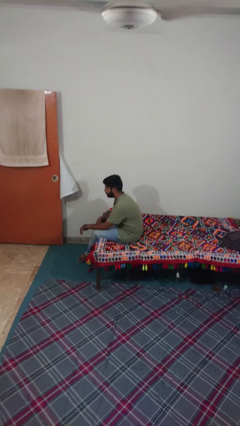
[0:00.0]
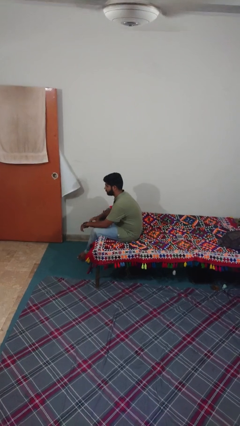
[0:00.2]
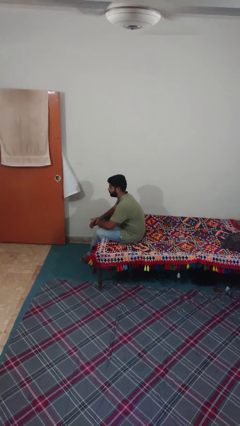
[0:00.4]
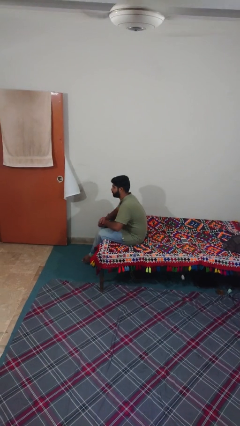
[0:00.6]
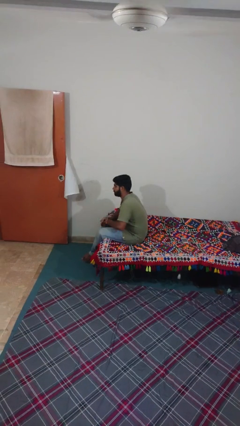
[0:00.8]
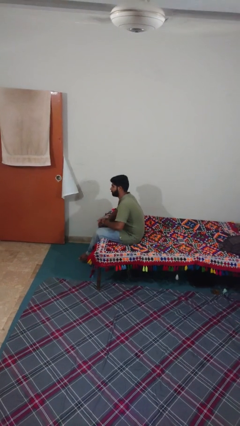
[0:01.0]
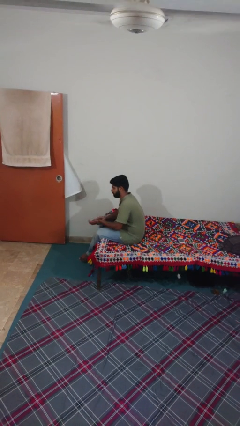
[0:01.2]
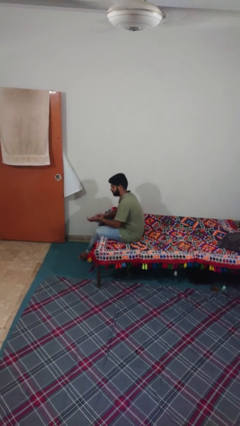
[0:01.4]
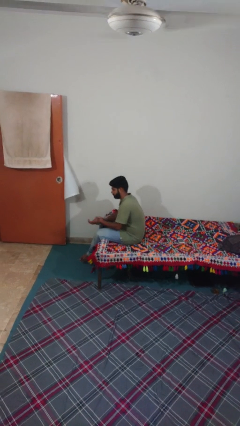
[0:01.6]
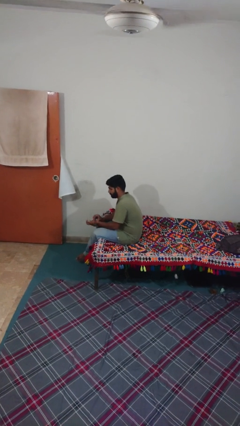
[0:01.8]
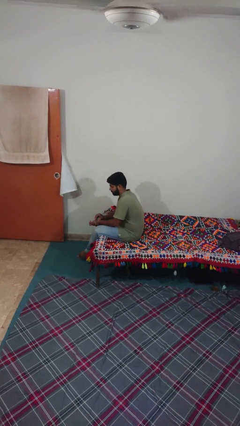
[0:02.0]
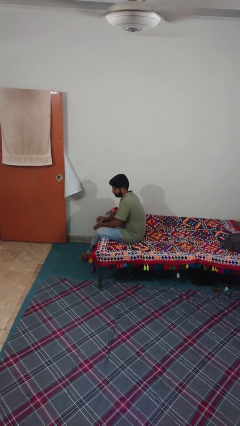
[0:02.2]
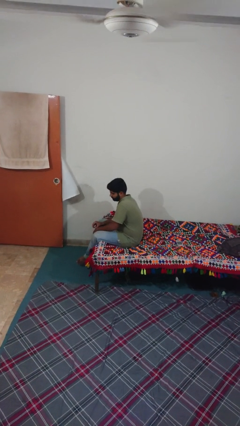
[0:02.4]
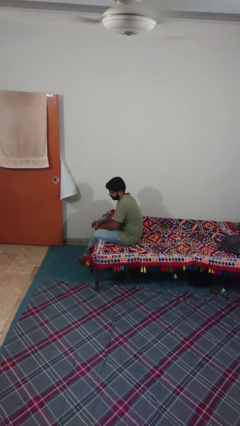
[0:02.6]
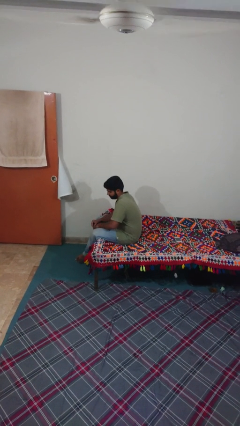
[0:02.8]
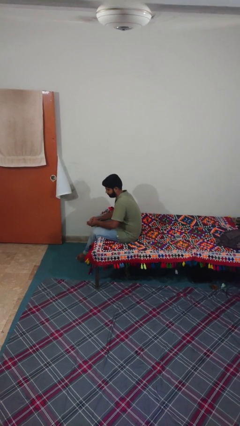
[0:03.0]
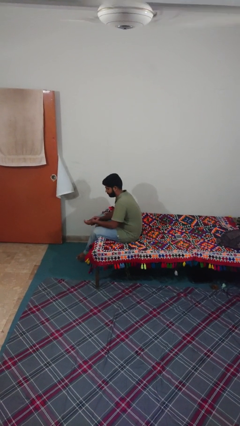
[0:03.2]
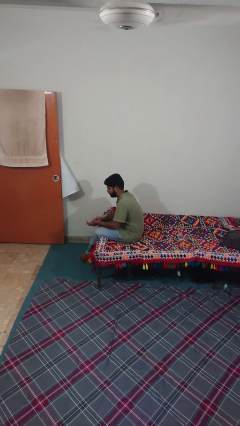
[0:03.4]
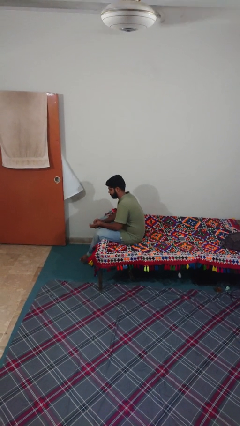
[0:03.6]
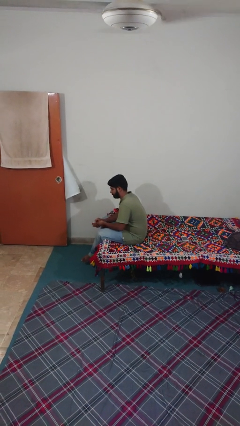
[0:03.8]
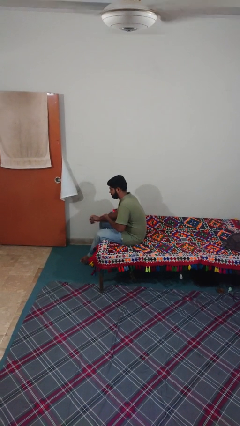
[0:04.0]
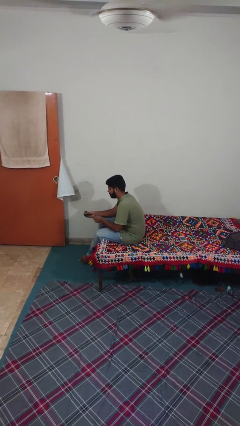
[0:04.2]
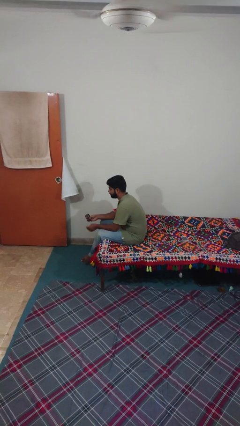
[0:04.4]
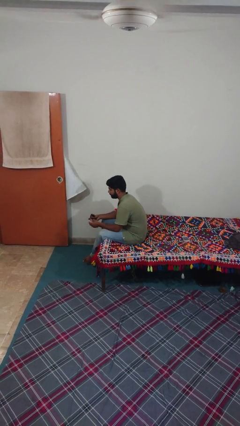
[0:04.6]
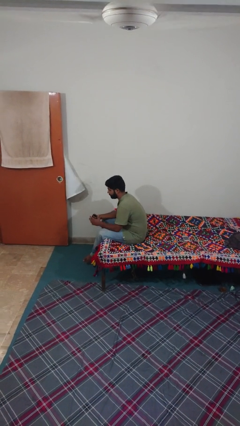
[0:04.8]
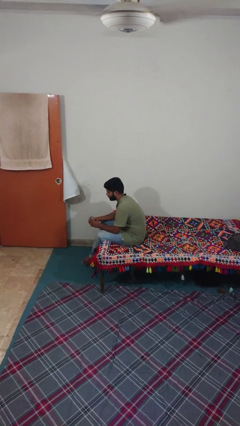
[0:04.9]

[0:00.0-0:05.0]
person takes off wristwatch

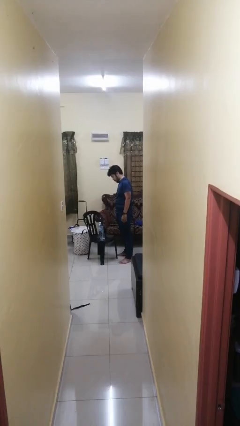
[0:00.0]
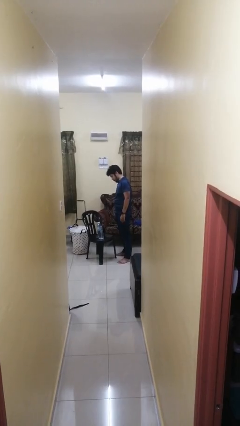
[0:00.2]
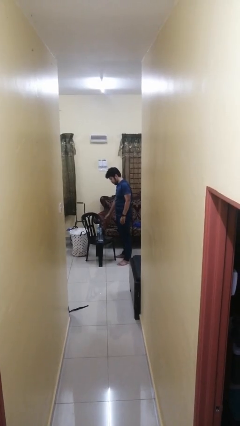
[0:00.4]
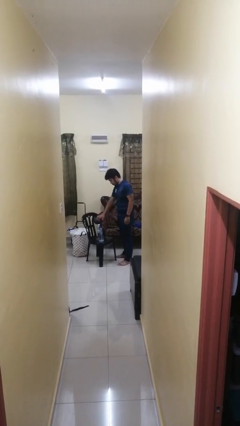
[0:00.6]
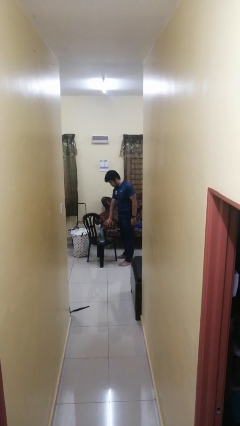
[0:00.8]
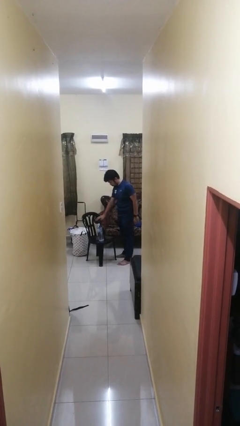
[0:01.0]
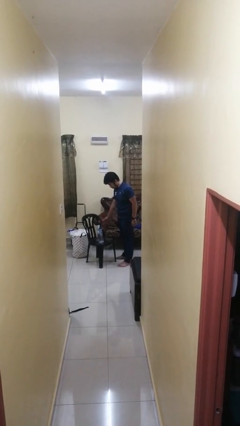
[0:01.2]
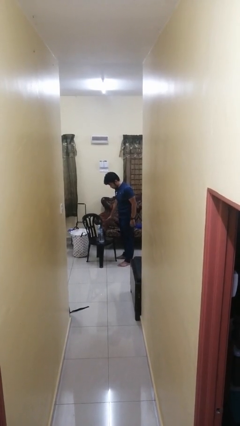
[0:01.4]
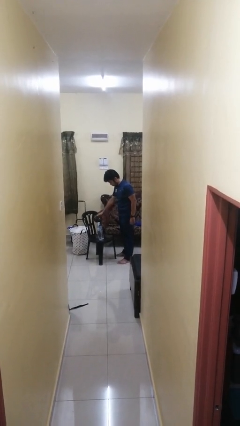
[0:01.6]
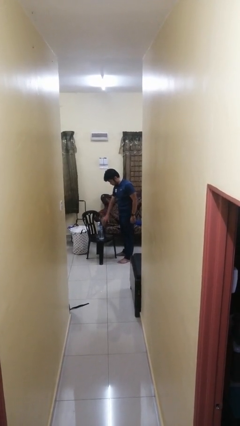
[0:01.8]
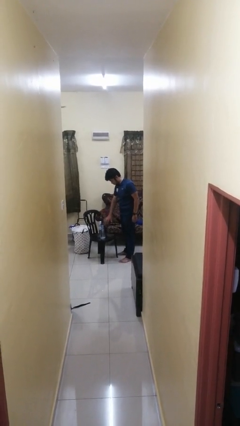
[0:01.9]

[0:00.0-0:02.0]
person waves hand over object

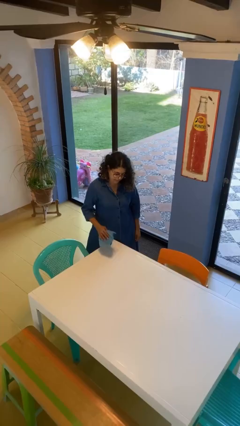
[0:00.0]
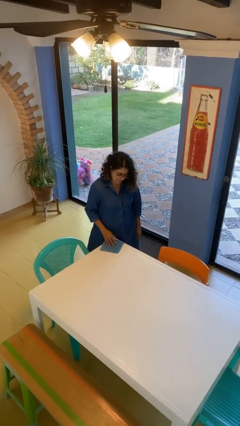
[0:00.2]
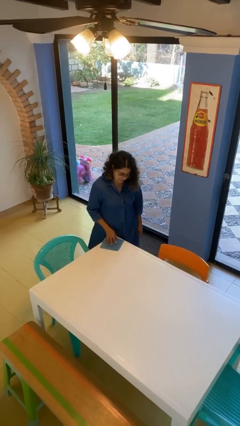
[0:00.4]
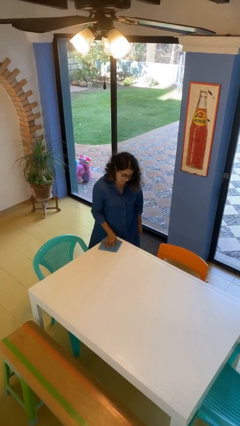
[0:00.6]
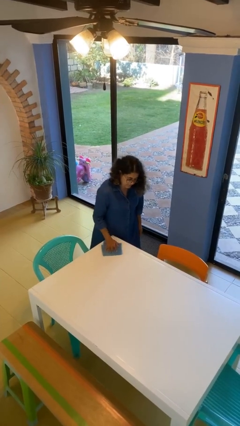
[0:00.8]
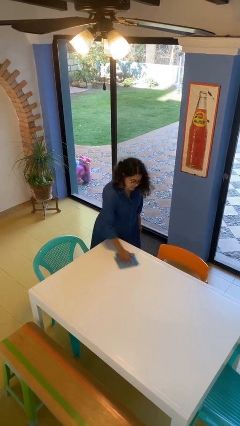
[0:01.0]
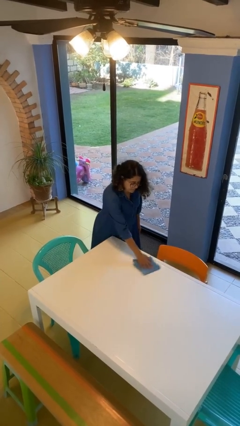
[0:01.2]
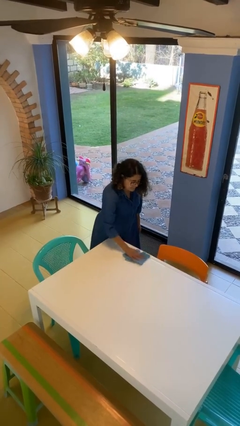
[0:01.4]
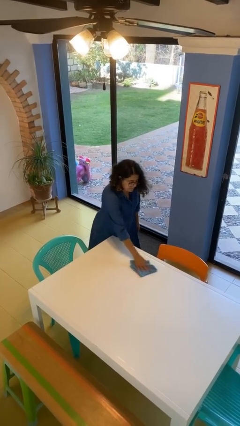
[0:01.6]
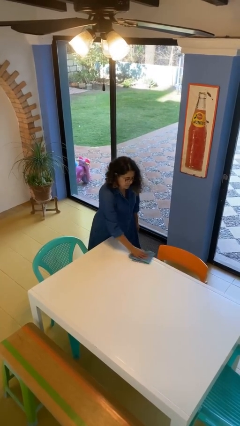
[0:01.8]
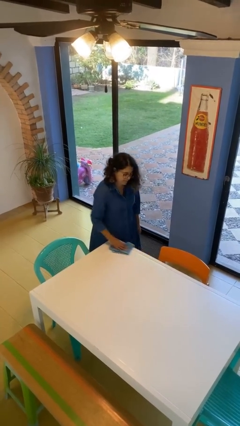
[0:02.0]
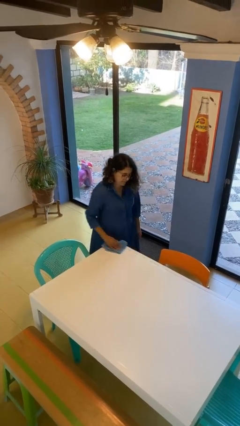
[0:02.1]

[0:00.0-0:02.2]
person cleans table with rag

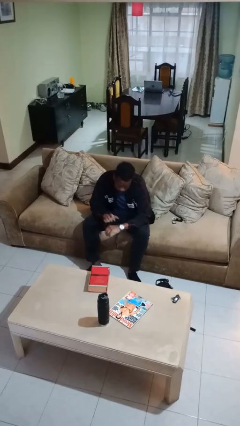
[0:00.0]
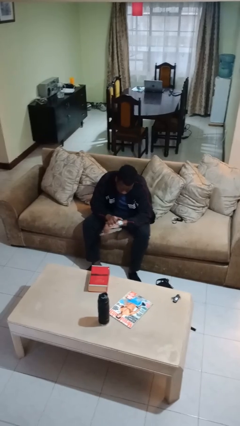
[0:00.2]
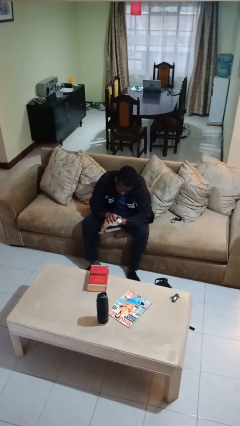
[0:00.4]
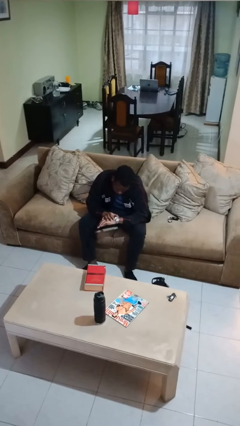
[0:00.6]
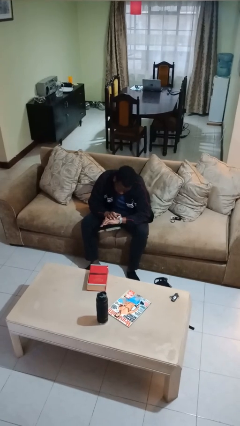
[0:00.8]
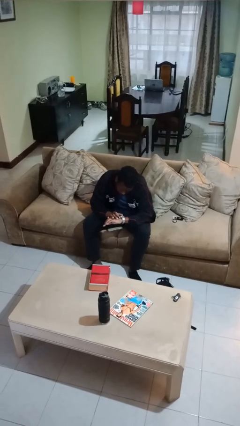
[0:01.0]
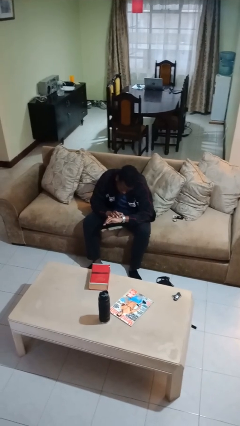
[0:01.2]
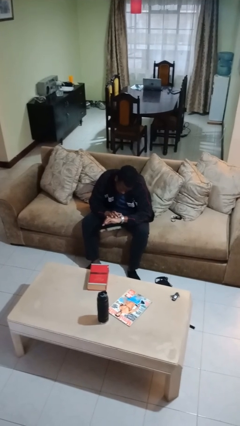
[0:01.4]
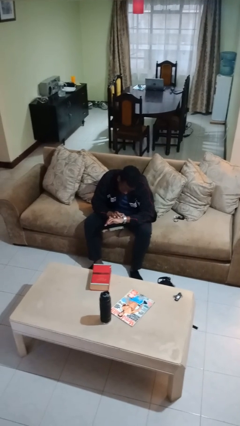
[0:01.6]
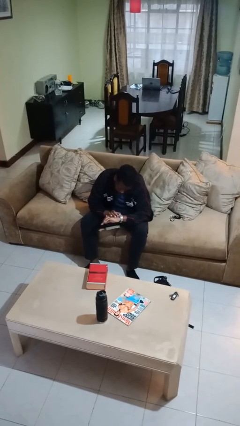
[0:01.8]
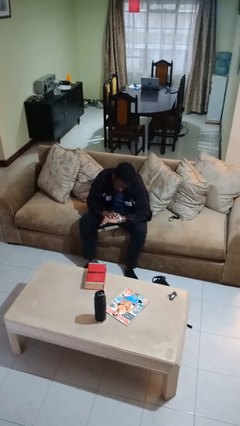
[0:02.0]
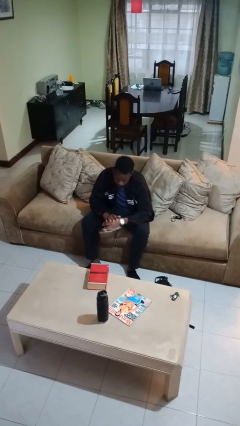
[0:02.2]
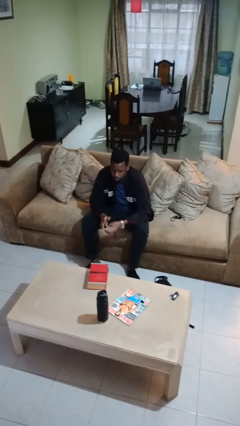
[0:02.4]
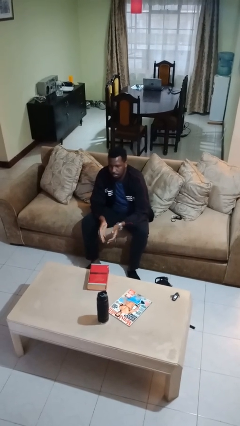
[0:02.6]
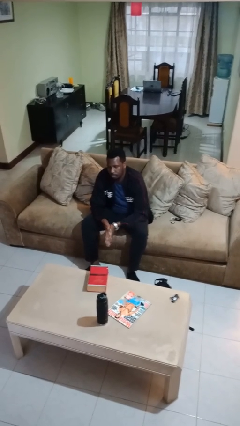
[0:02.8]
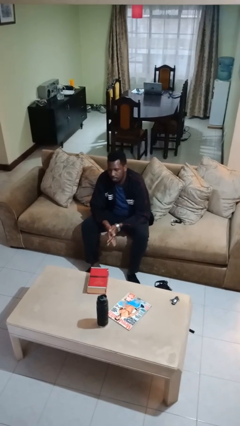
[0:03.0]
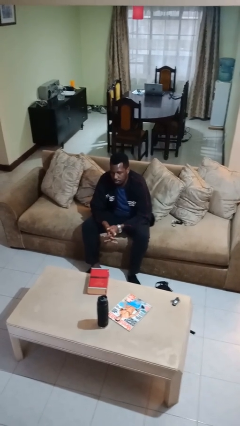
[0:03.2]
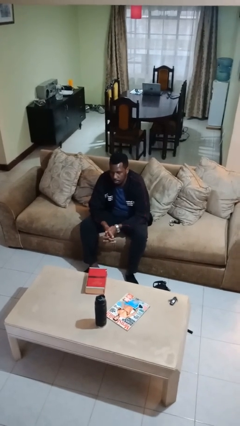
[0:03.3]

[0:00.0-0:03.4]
person looks at wristwatch

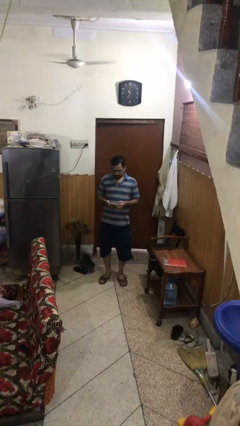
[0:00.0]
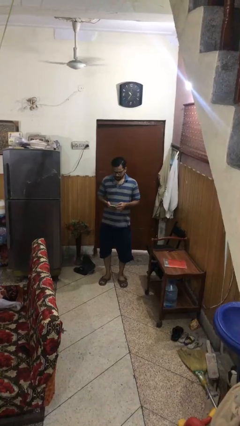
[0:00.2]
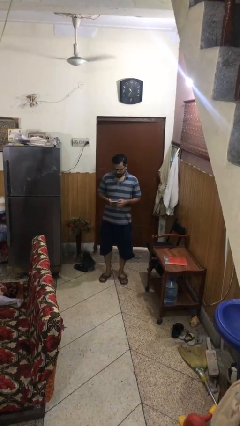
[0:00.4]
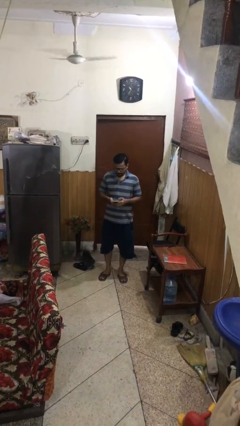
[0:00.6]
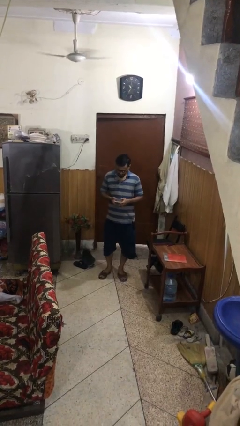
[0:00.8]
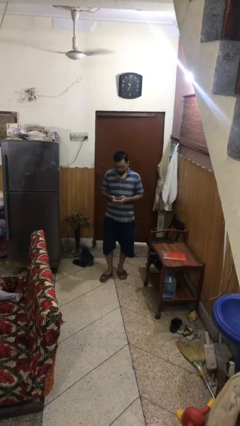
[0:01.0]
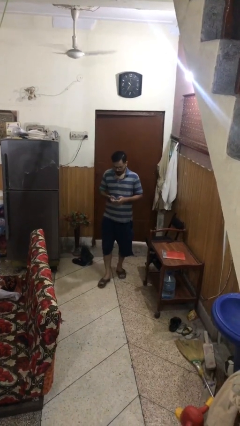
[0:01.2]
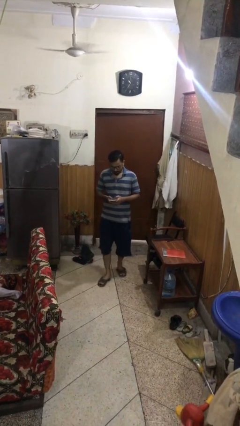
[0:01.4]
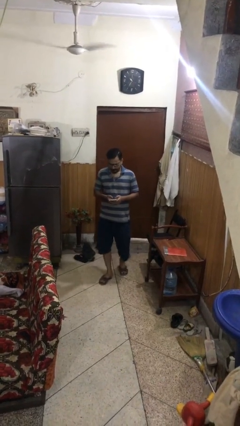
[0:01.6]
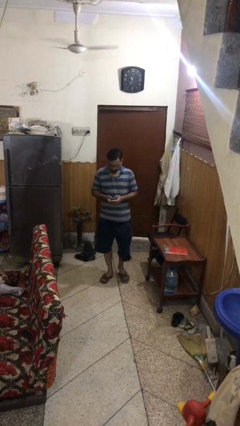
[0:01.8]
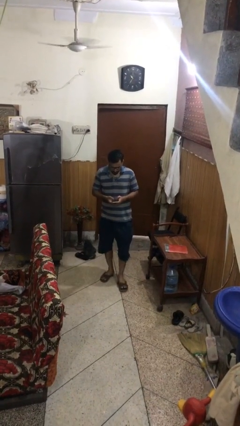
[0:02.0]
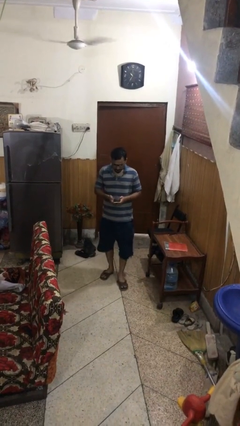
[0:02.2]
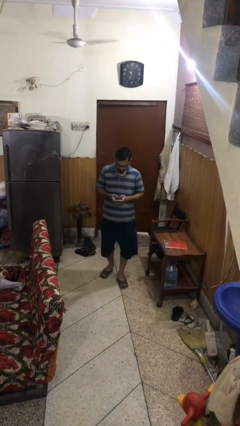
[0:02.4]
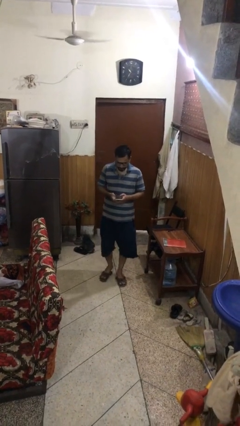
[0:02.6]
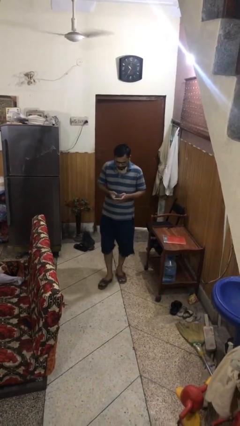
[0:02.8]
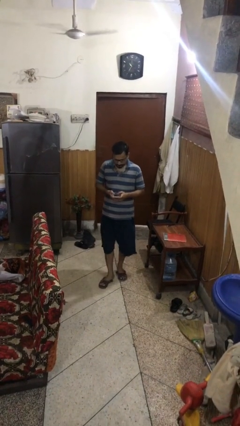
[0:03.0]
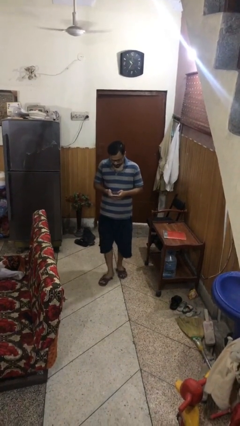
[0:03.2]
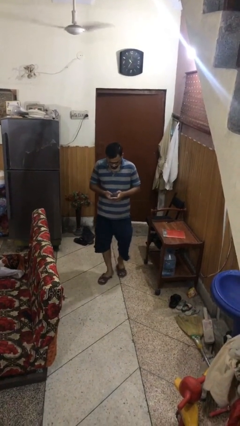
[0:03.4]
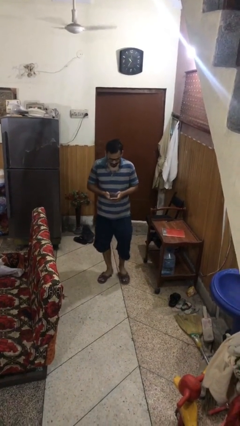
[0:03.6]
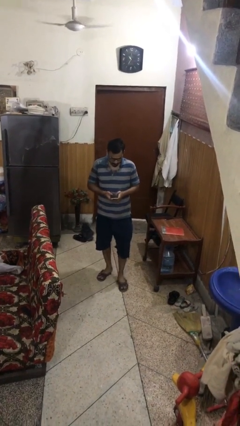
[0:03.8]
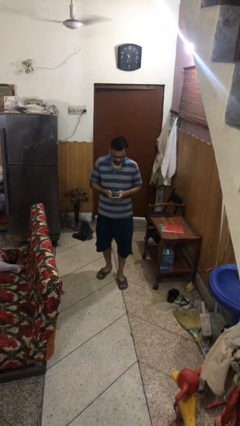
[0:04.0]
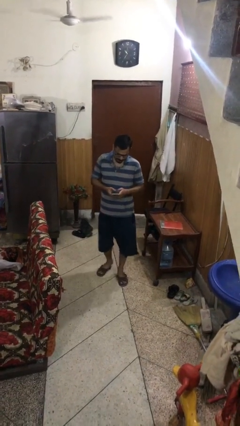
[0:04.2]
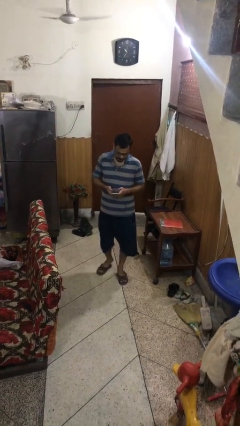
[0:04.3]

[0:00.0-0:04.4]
person texts on phone

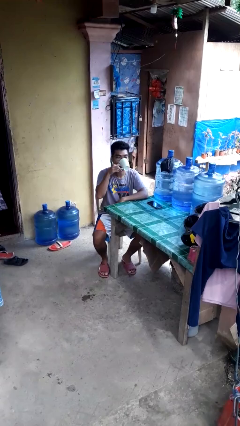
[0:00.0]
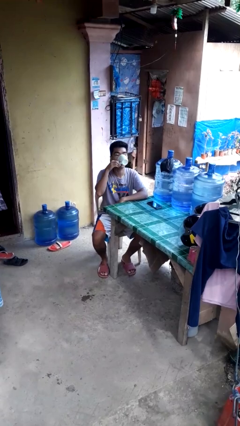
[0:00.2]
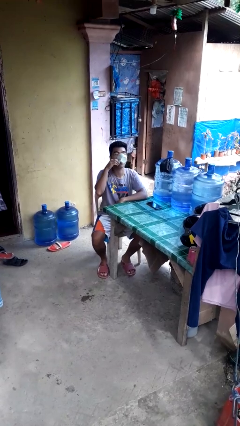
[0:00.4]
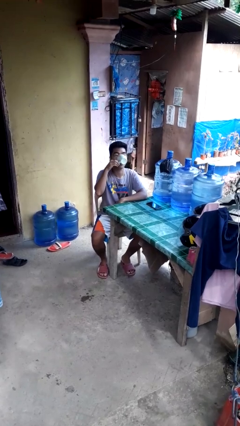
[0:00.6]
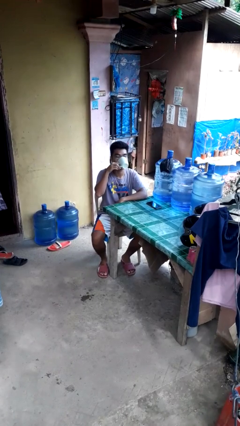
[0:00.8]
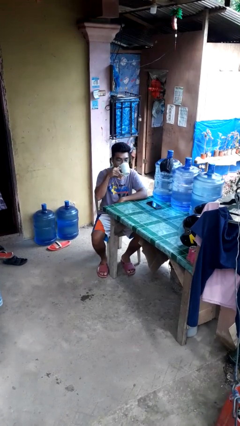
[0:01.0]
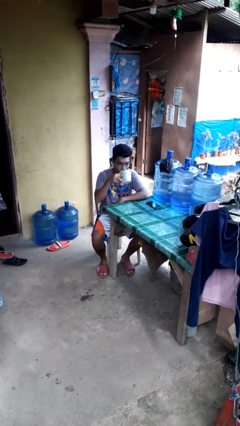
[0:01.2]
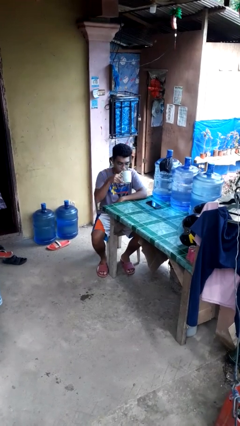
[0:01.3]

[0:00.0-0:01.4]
person drinks from mug
